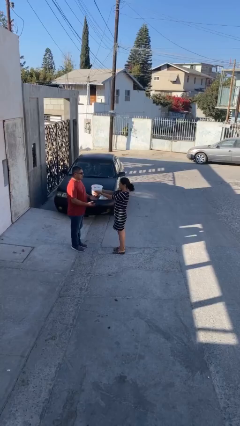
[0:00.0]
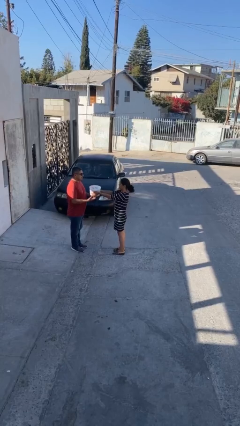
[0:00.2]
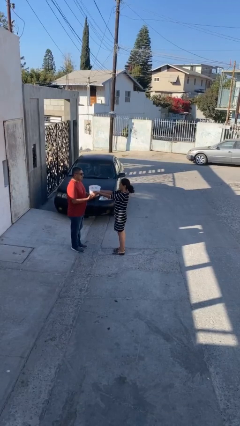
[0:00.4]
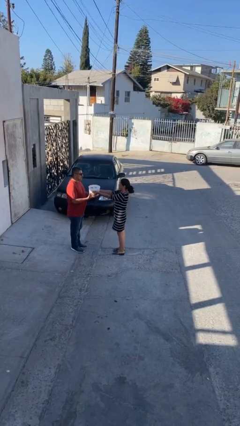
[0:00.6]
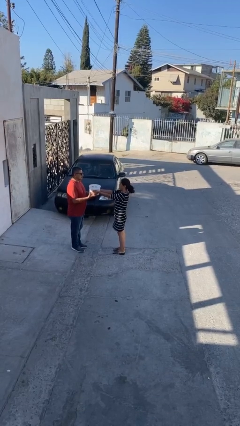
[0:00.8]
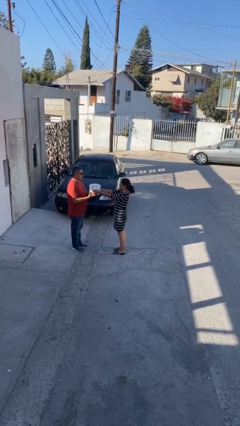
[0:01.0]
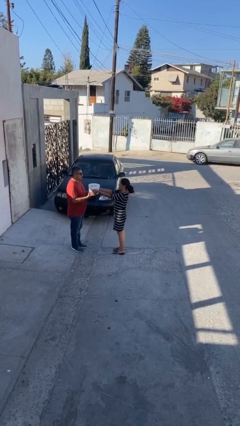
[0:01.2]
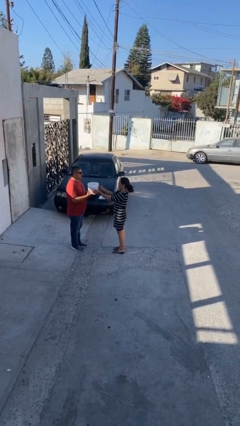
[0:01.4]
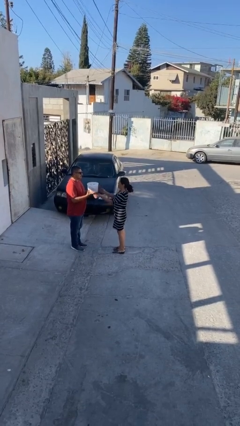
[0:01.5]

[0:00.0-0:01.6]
person transfers object to person

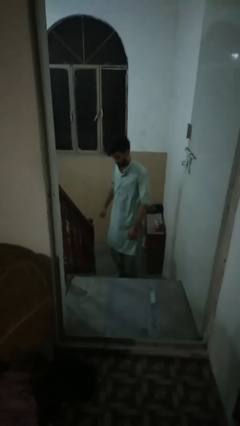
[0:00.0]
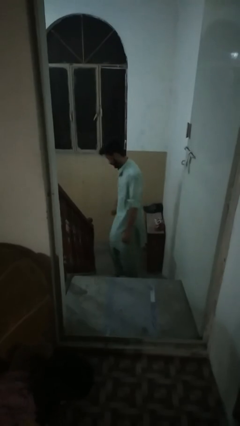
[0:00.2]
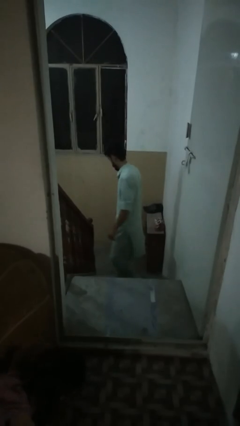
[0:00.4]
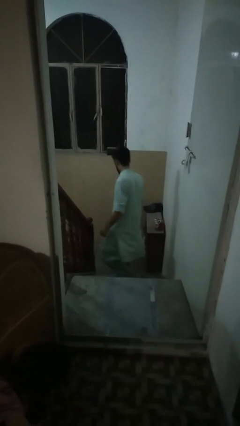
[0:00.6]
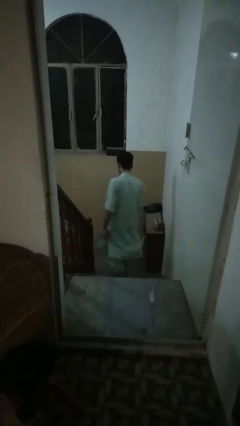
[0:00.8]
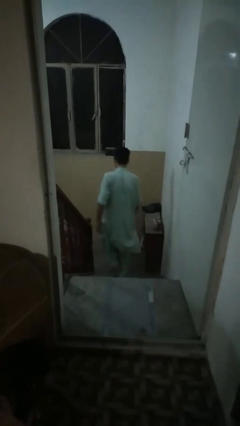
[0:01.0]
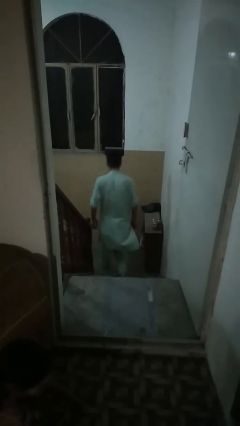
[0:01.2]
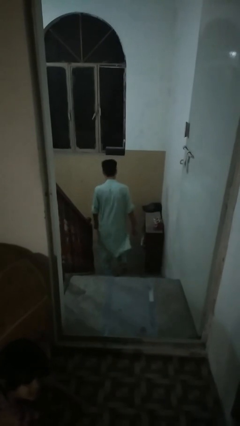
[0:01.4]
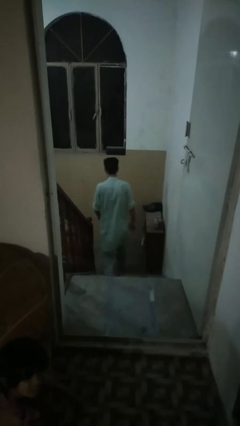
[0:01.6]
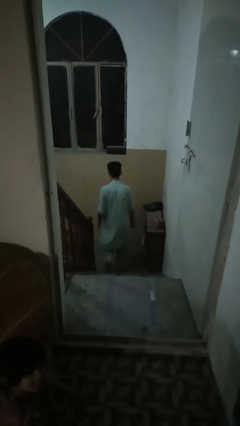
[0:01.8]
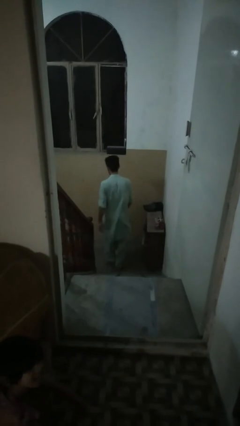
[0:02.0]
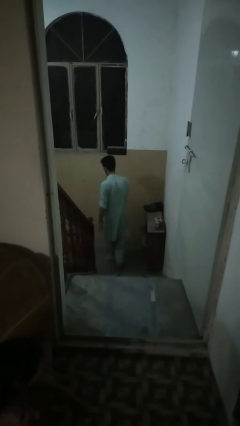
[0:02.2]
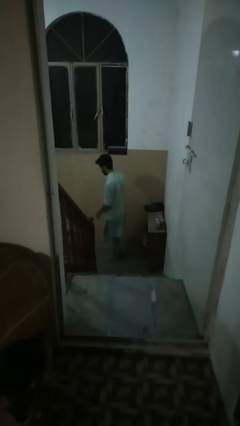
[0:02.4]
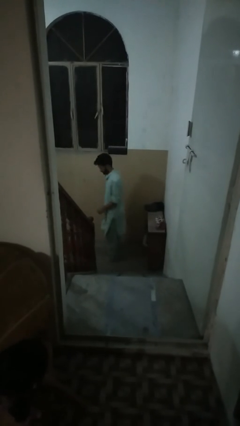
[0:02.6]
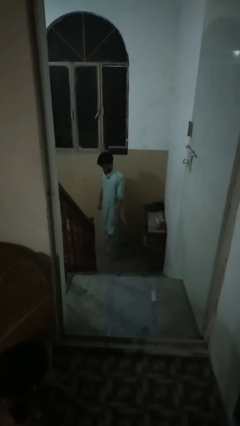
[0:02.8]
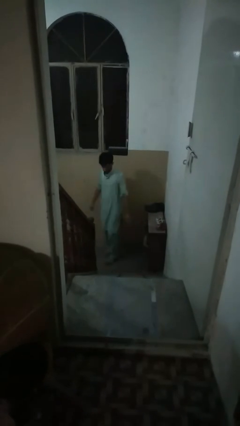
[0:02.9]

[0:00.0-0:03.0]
person climbs down stairs

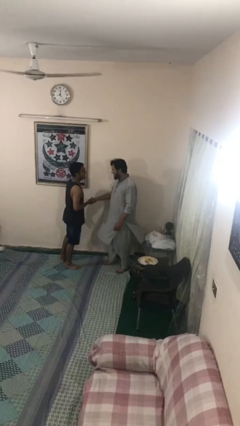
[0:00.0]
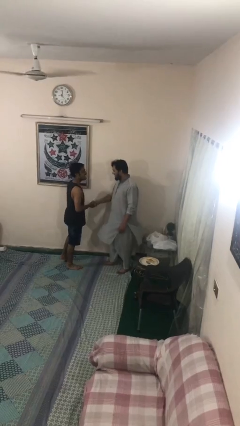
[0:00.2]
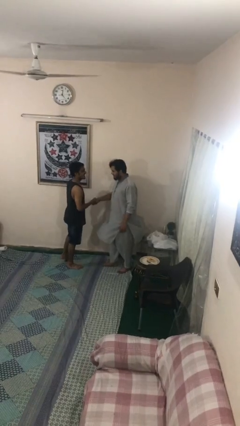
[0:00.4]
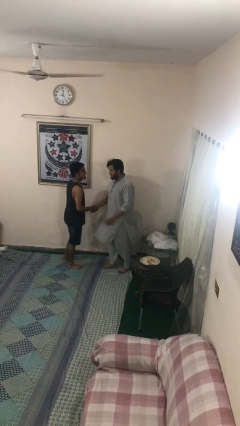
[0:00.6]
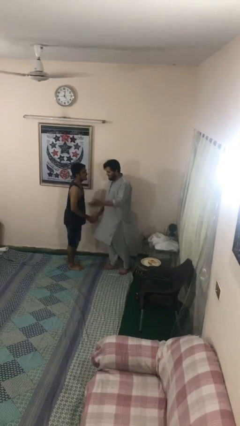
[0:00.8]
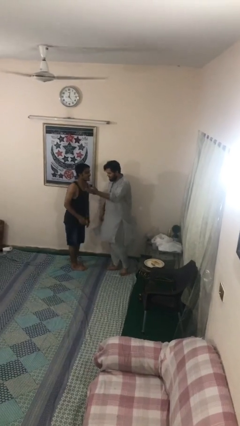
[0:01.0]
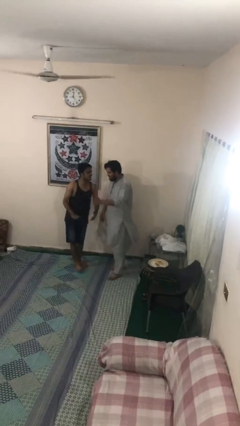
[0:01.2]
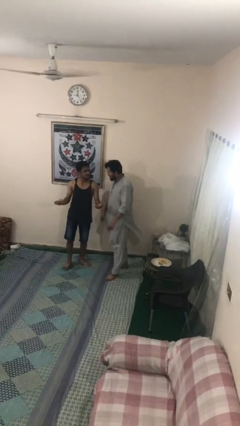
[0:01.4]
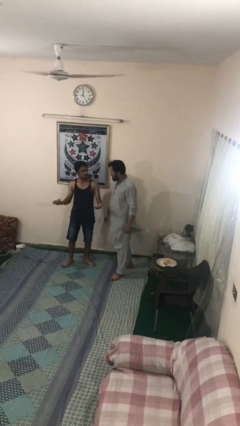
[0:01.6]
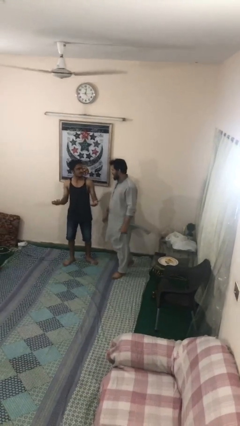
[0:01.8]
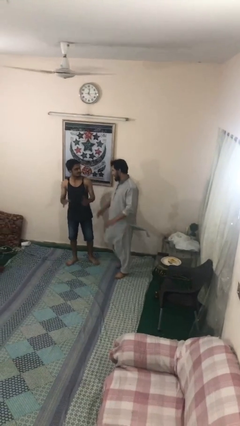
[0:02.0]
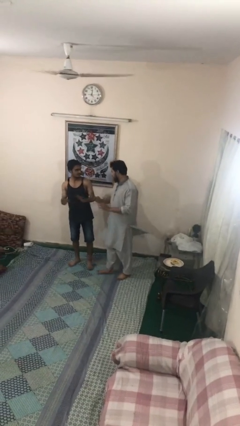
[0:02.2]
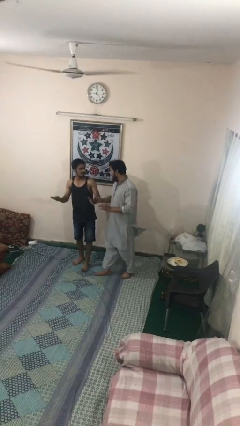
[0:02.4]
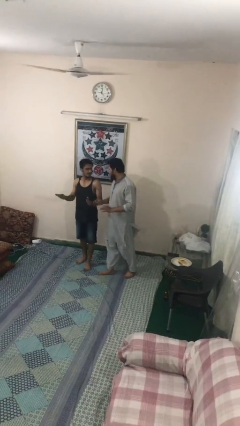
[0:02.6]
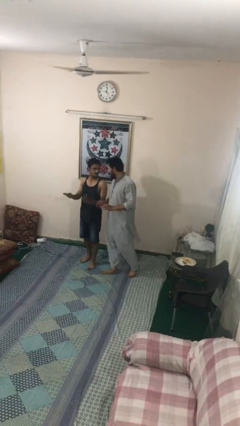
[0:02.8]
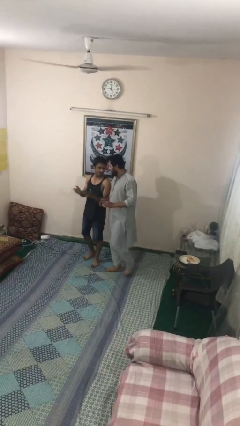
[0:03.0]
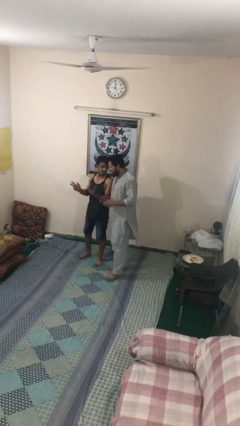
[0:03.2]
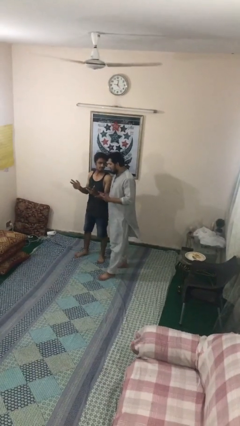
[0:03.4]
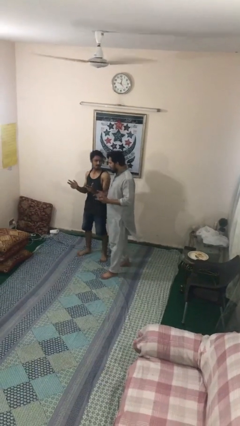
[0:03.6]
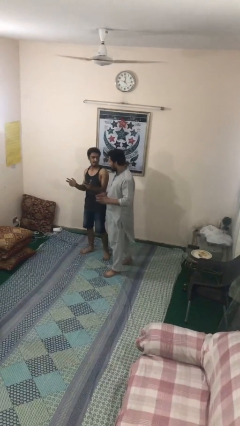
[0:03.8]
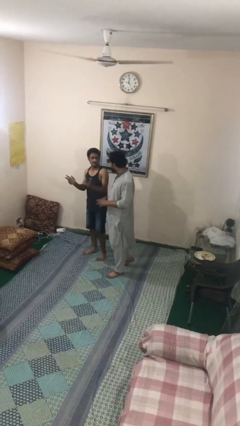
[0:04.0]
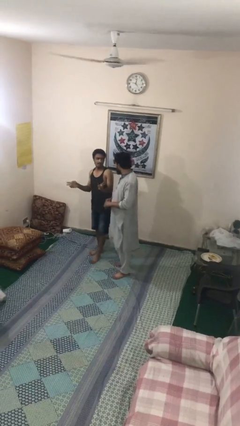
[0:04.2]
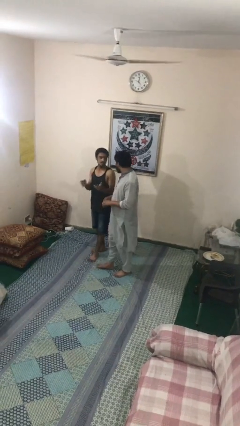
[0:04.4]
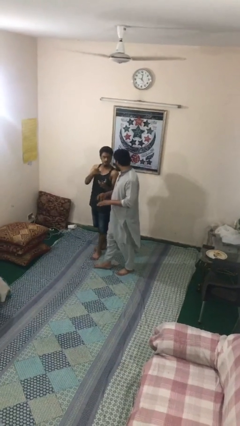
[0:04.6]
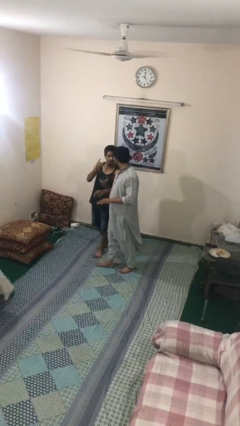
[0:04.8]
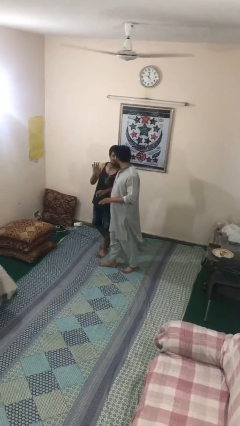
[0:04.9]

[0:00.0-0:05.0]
person talks to person

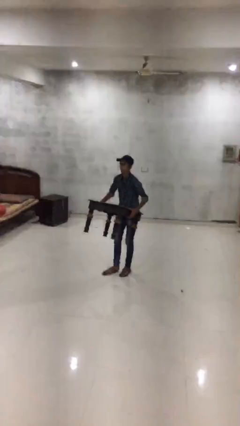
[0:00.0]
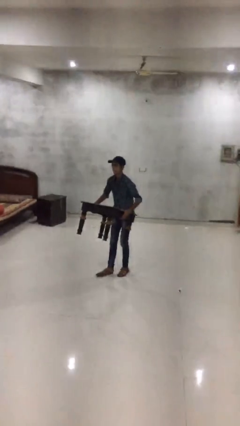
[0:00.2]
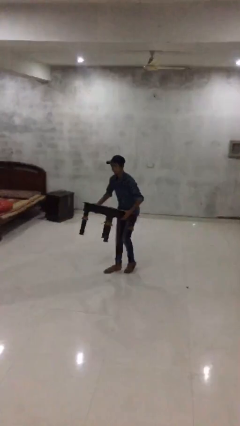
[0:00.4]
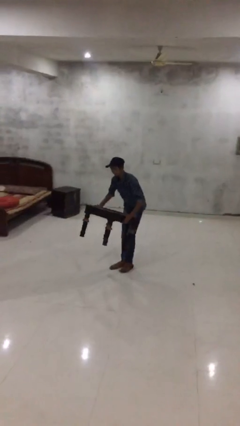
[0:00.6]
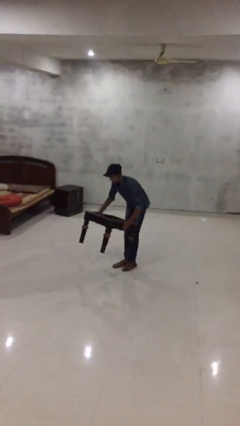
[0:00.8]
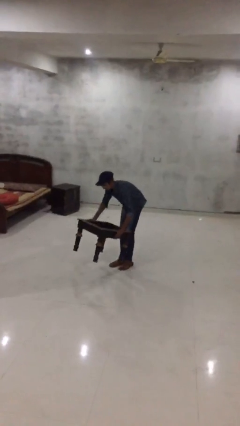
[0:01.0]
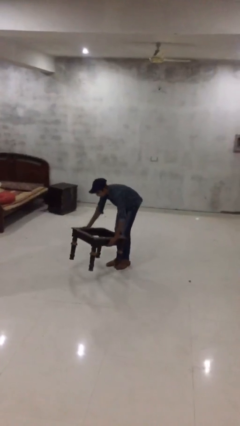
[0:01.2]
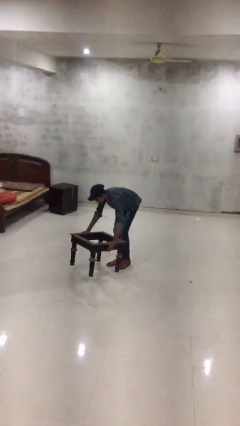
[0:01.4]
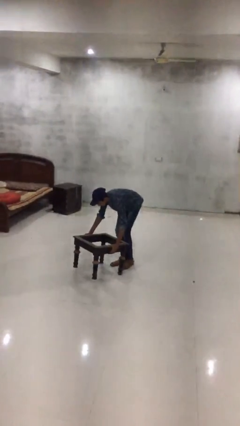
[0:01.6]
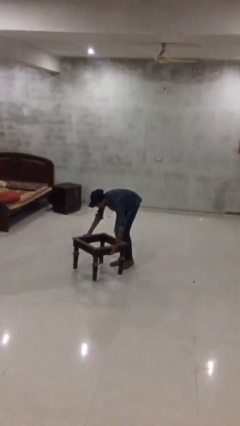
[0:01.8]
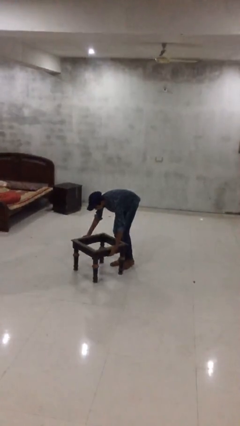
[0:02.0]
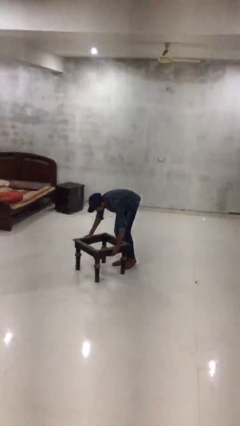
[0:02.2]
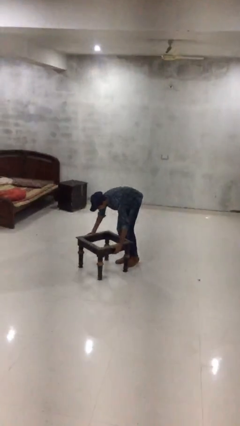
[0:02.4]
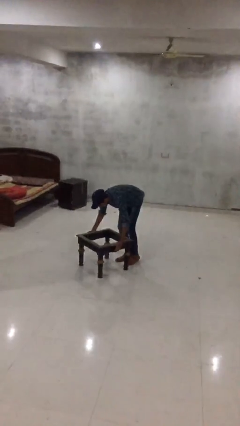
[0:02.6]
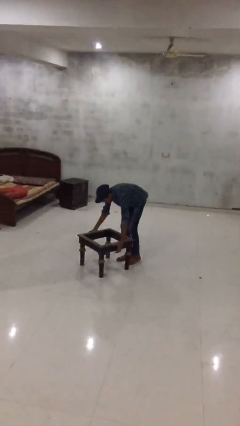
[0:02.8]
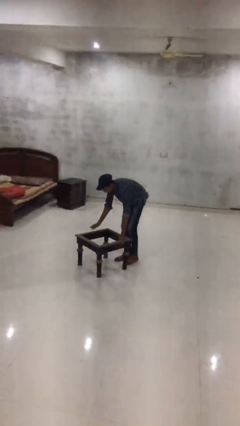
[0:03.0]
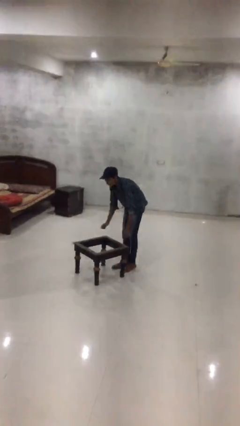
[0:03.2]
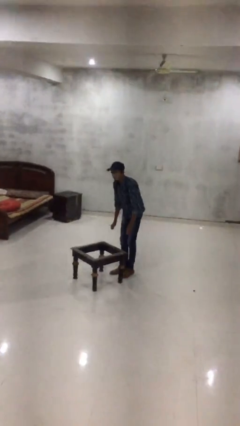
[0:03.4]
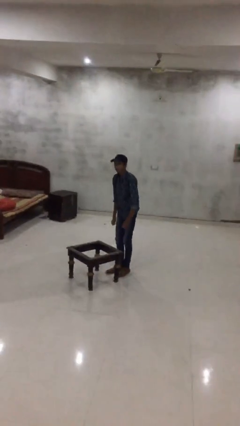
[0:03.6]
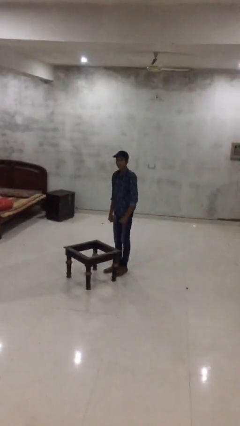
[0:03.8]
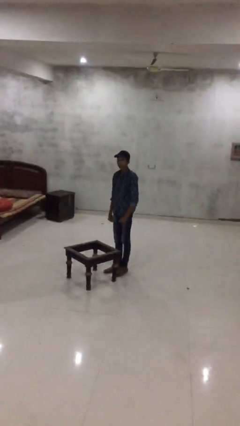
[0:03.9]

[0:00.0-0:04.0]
person puts down object on floor

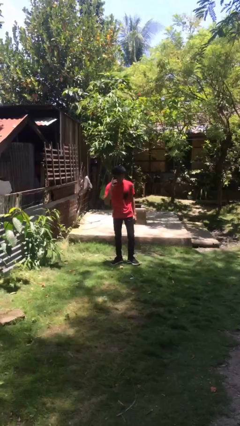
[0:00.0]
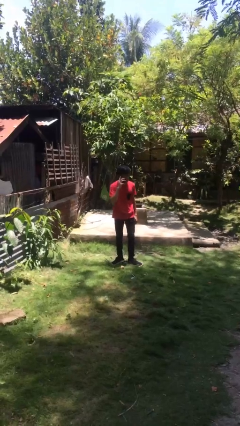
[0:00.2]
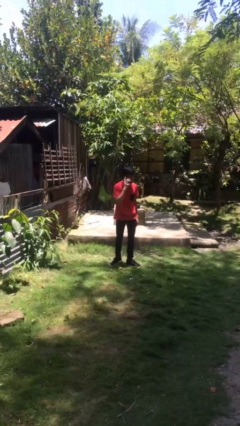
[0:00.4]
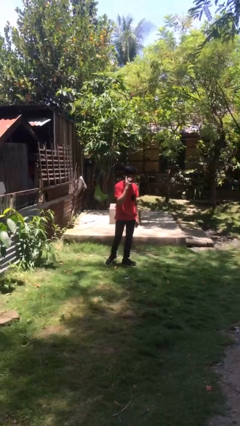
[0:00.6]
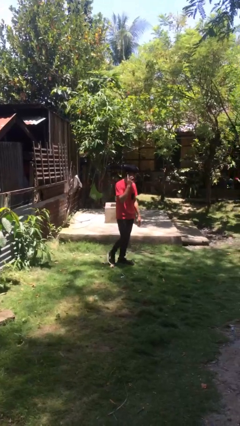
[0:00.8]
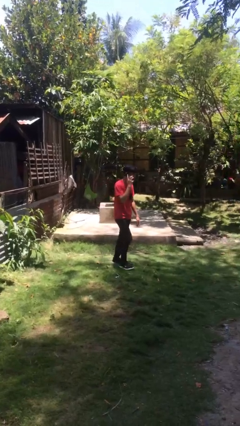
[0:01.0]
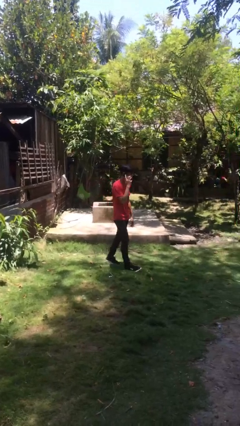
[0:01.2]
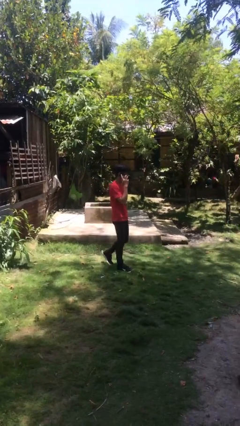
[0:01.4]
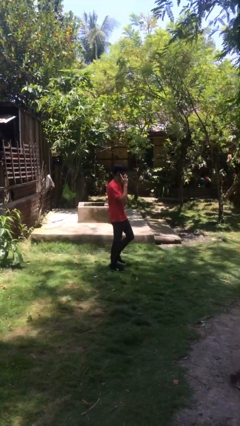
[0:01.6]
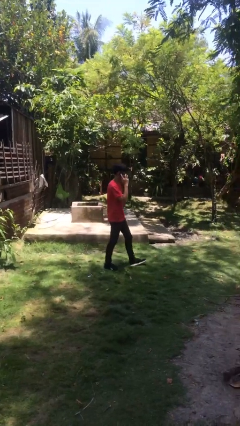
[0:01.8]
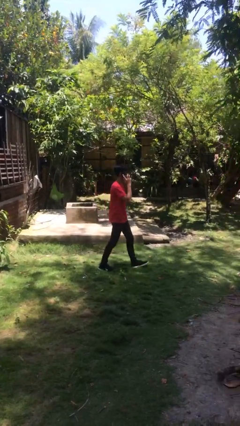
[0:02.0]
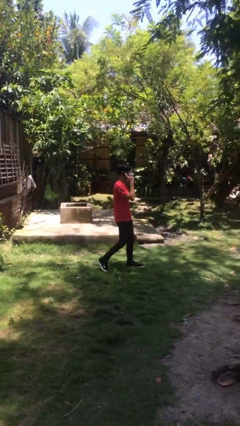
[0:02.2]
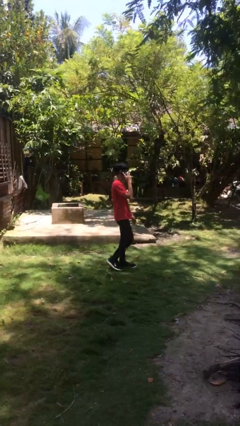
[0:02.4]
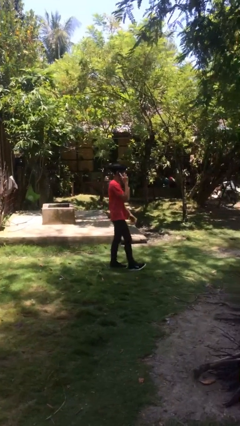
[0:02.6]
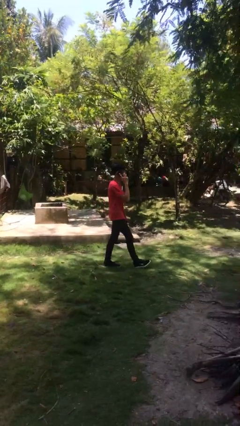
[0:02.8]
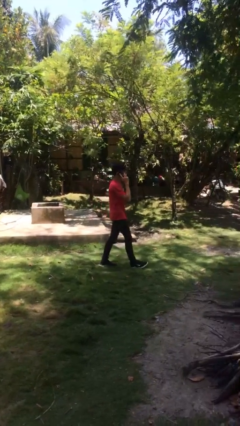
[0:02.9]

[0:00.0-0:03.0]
person talks on phone

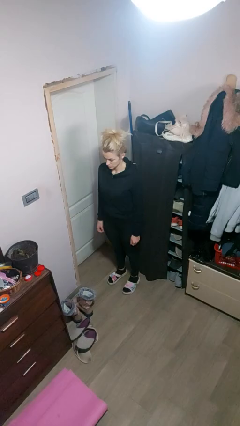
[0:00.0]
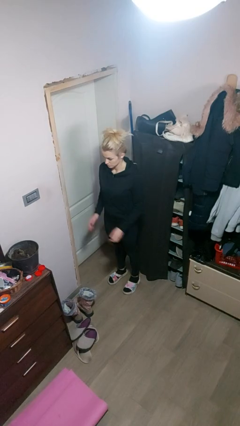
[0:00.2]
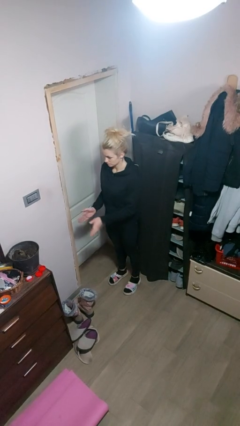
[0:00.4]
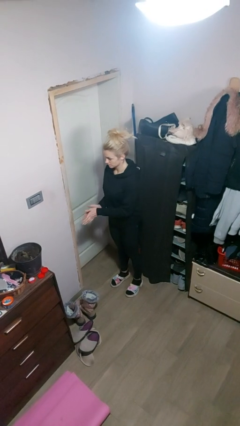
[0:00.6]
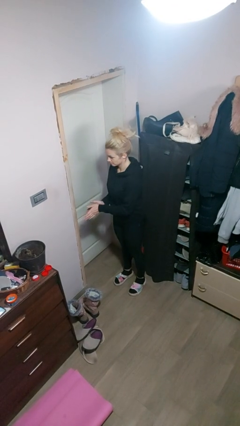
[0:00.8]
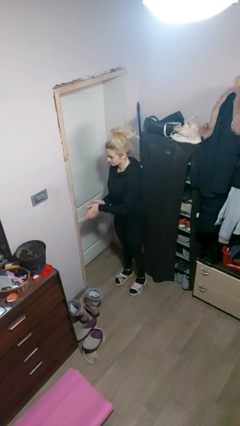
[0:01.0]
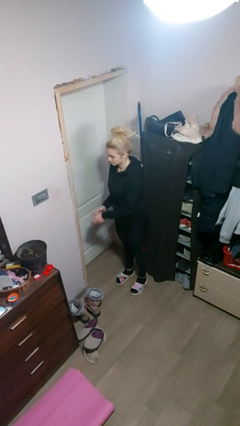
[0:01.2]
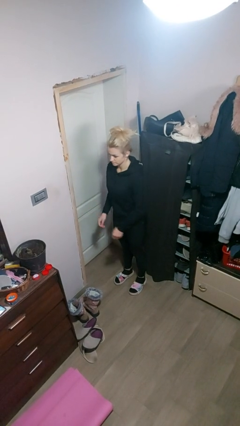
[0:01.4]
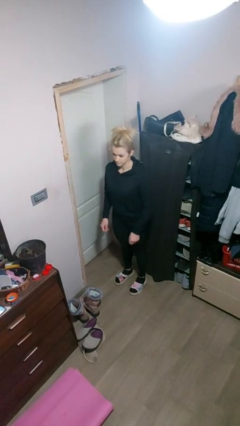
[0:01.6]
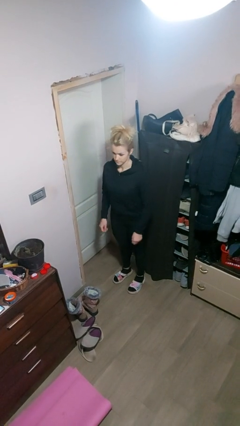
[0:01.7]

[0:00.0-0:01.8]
person claps hands
